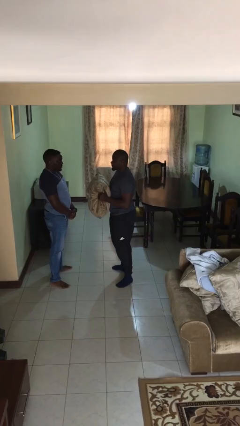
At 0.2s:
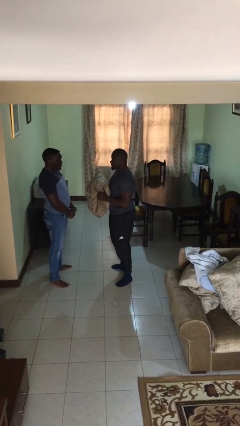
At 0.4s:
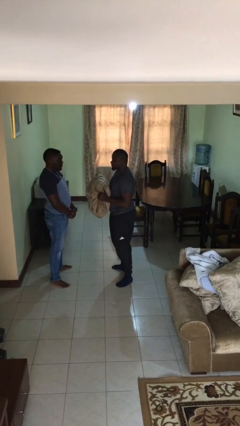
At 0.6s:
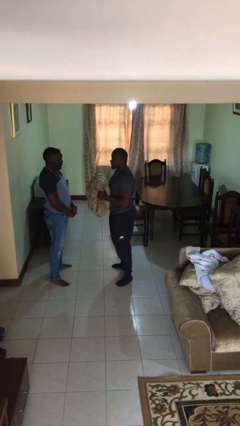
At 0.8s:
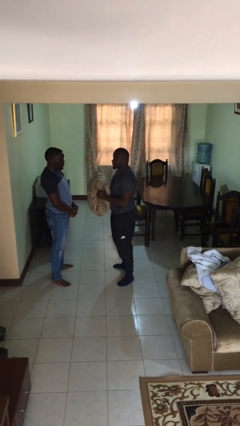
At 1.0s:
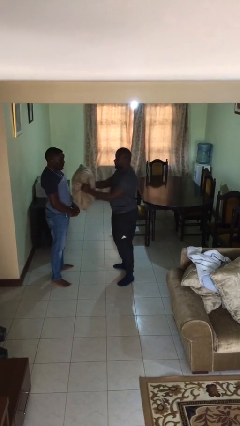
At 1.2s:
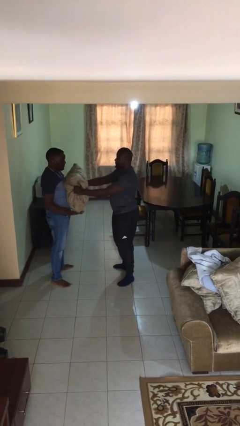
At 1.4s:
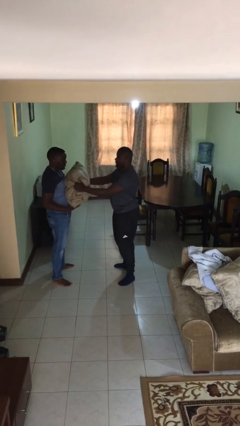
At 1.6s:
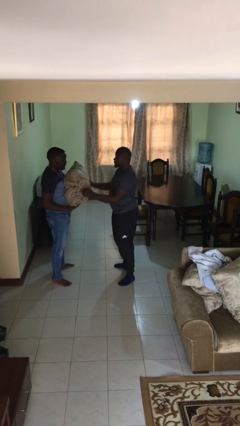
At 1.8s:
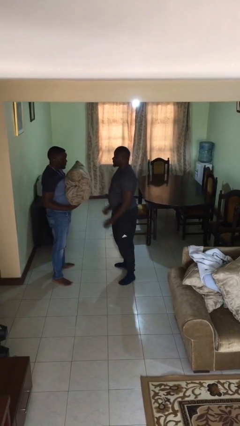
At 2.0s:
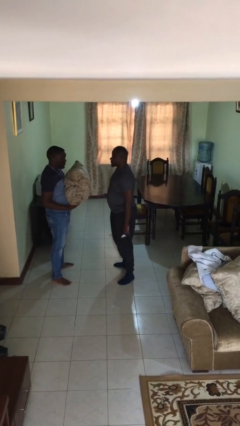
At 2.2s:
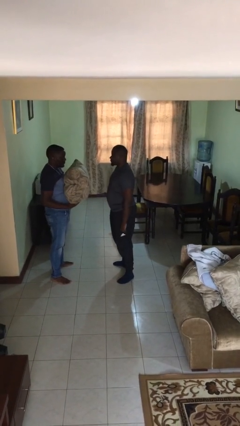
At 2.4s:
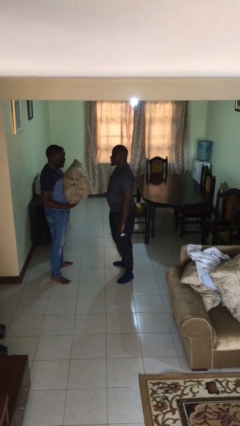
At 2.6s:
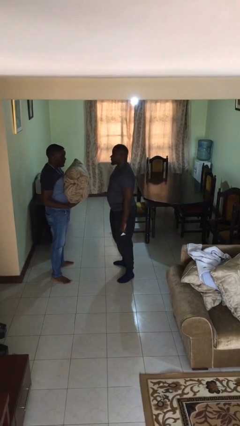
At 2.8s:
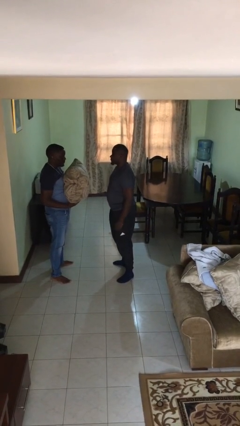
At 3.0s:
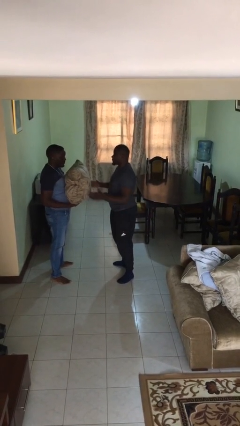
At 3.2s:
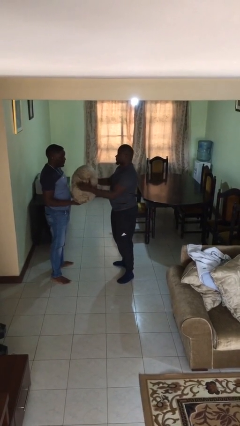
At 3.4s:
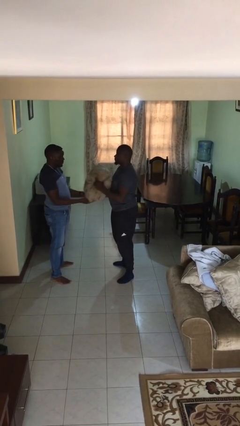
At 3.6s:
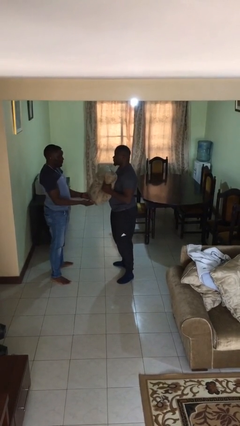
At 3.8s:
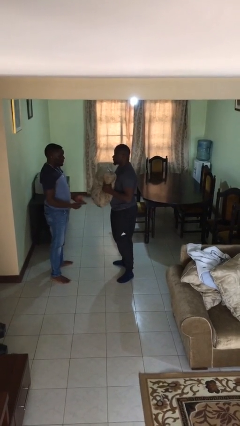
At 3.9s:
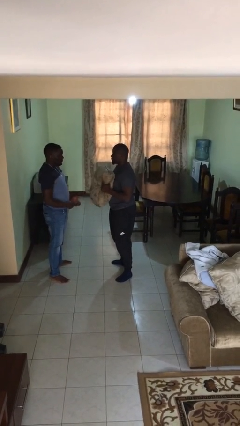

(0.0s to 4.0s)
person transfers object to person

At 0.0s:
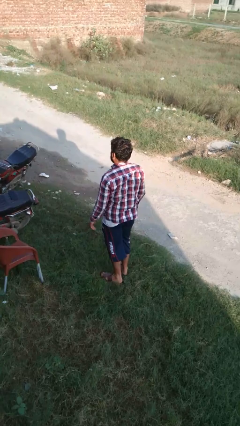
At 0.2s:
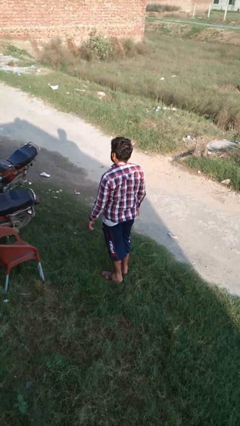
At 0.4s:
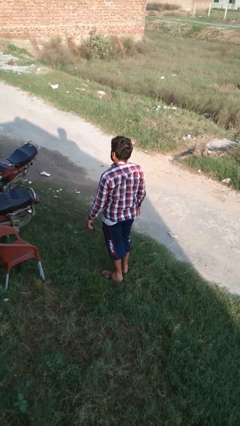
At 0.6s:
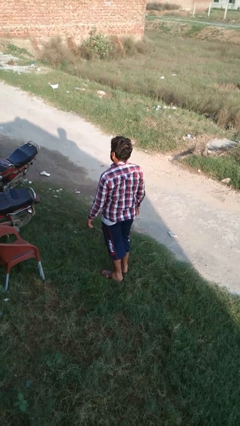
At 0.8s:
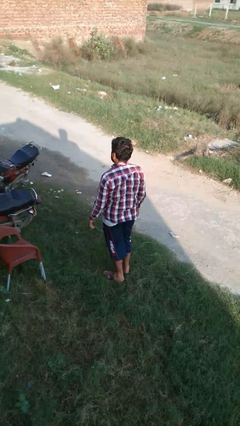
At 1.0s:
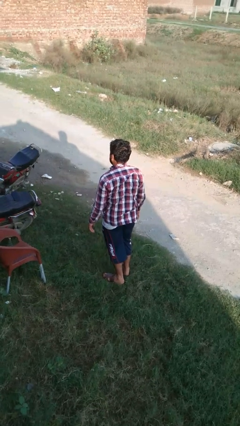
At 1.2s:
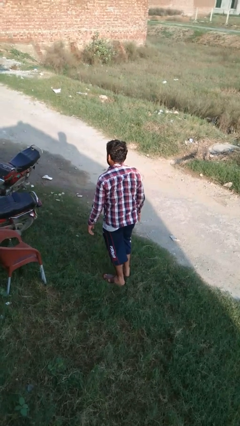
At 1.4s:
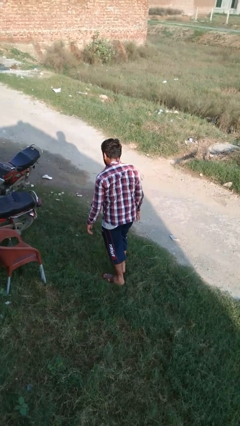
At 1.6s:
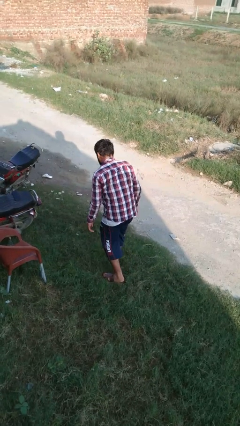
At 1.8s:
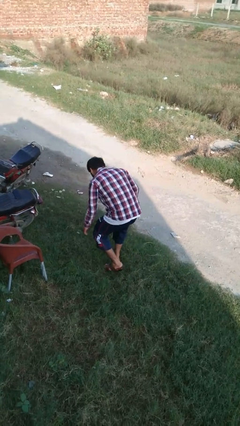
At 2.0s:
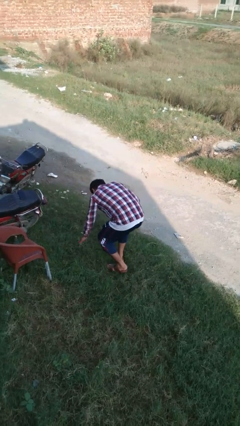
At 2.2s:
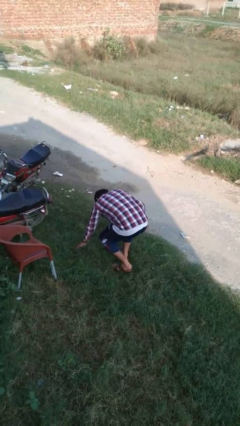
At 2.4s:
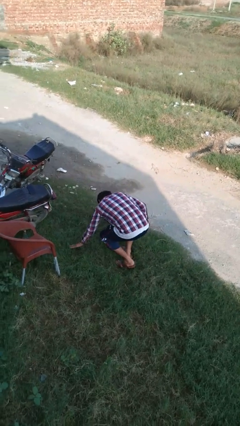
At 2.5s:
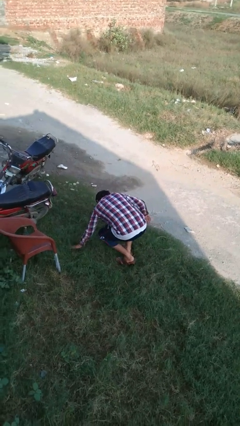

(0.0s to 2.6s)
person trips on object on floor

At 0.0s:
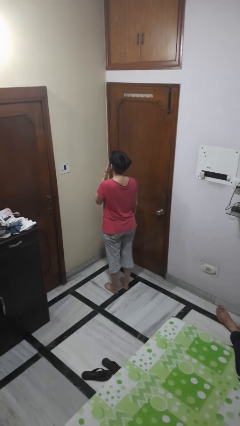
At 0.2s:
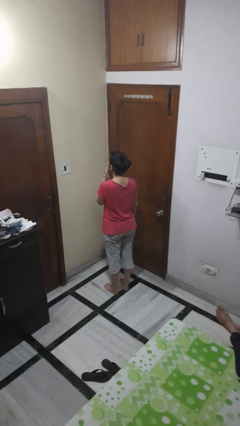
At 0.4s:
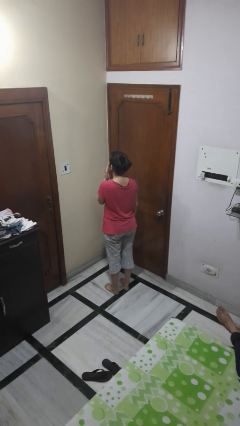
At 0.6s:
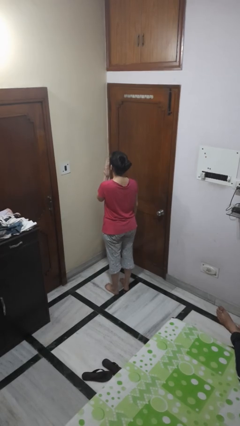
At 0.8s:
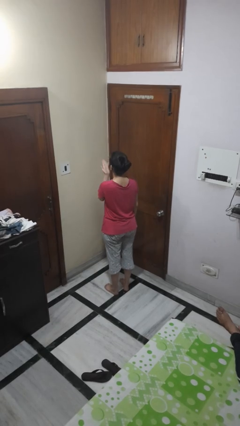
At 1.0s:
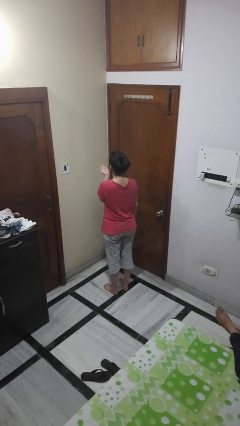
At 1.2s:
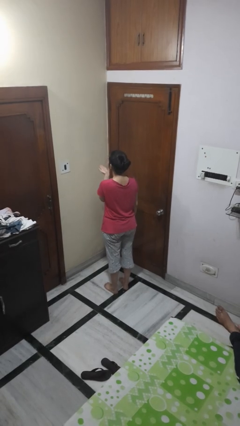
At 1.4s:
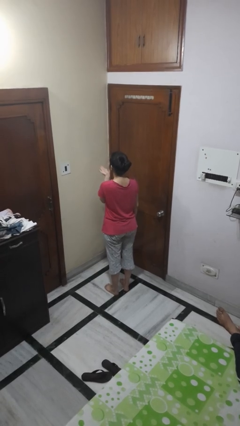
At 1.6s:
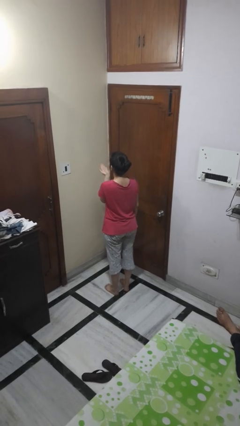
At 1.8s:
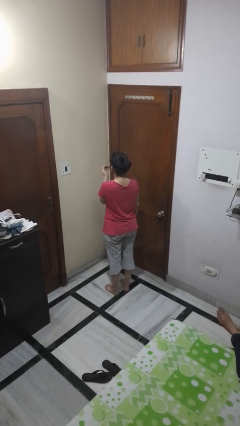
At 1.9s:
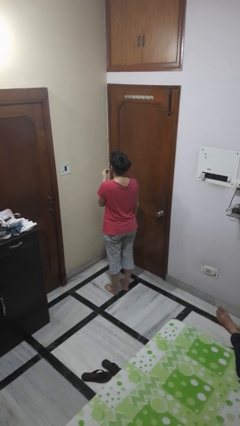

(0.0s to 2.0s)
person gestures blow kiss

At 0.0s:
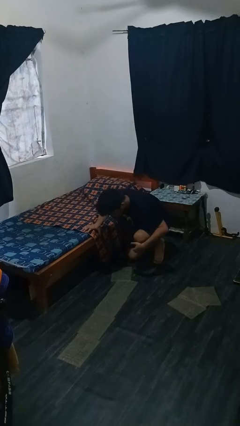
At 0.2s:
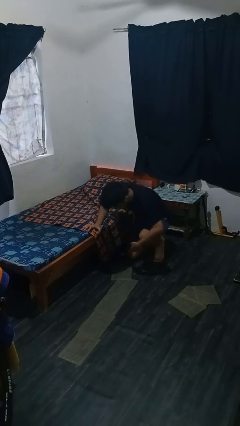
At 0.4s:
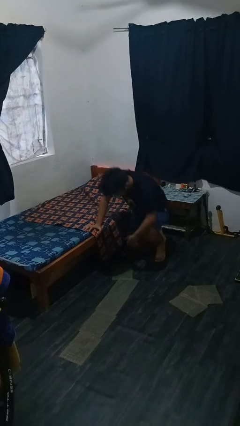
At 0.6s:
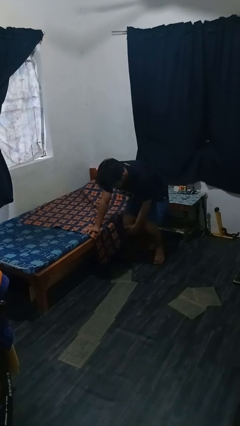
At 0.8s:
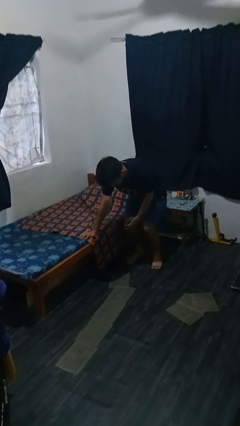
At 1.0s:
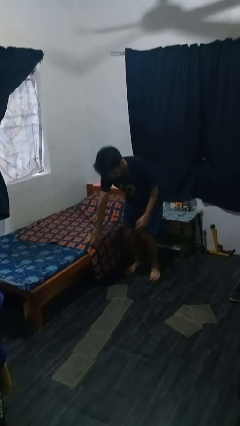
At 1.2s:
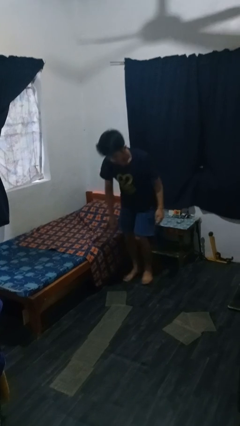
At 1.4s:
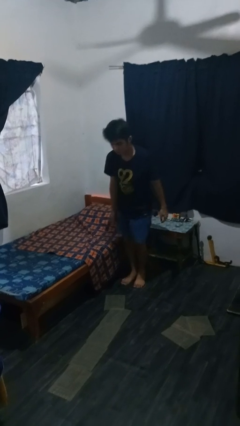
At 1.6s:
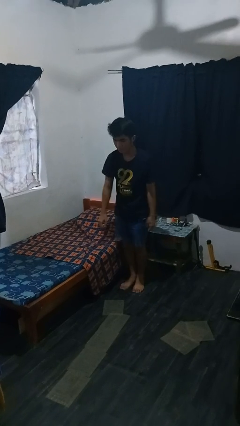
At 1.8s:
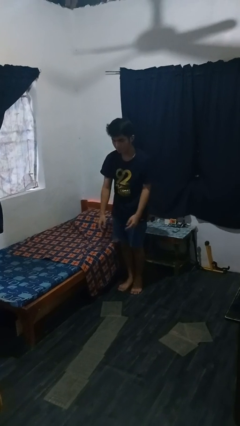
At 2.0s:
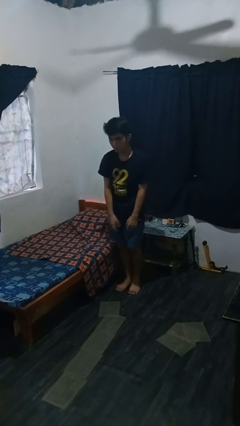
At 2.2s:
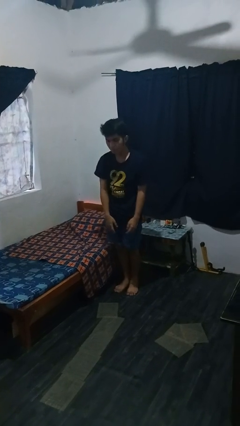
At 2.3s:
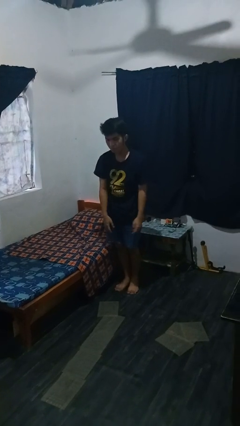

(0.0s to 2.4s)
person stands up from floor

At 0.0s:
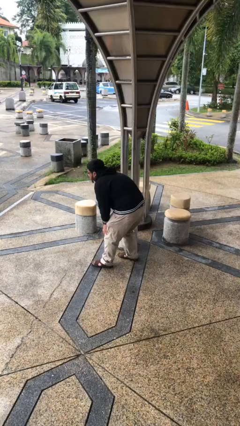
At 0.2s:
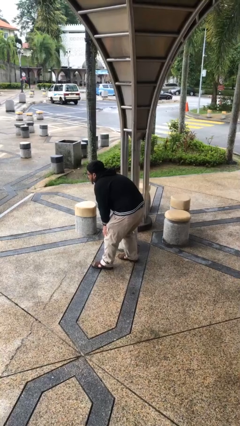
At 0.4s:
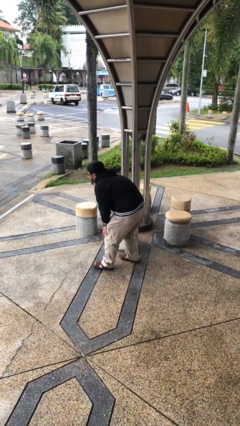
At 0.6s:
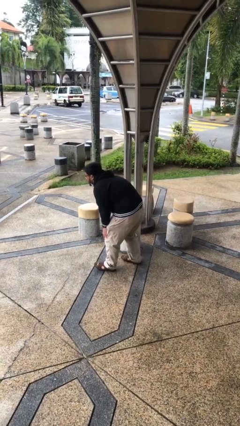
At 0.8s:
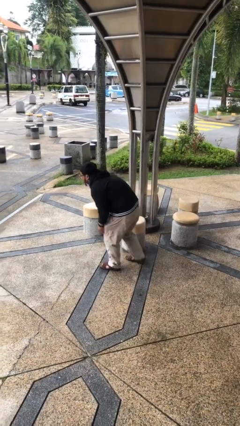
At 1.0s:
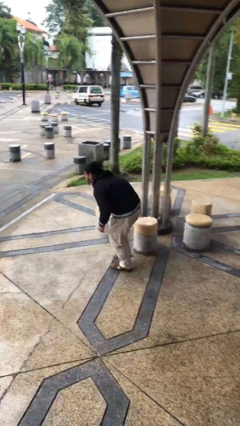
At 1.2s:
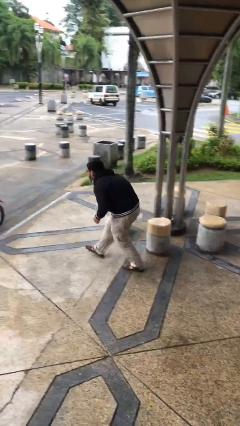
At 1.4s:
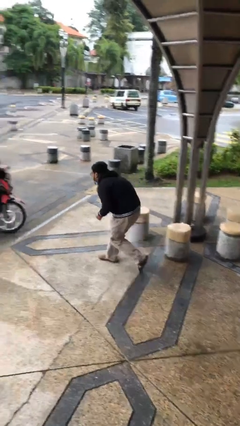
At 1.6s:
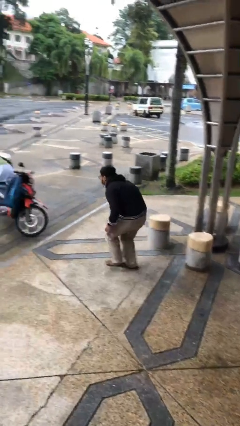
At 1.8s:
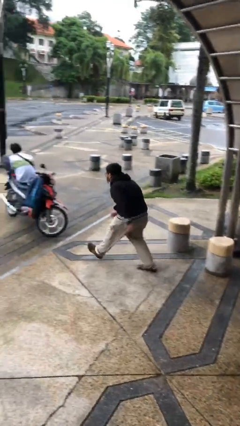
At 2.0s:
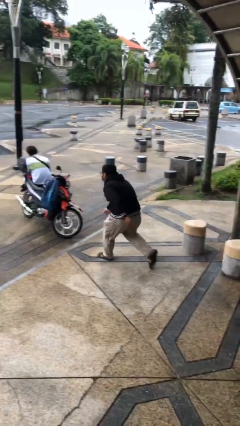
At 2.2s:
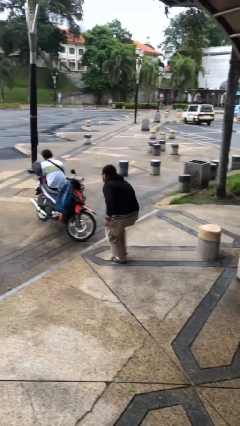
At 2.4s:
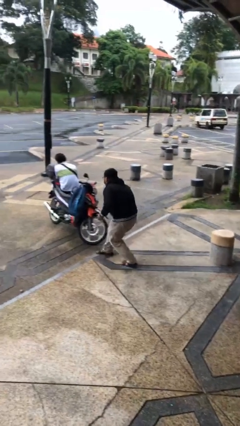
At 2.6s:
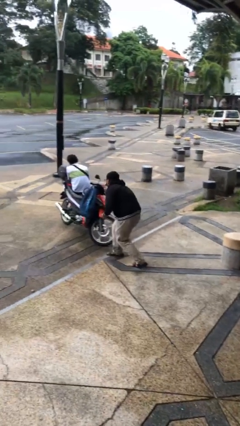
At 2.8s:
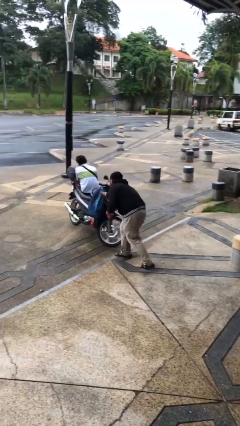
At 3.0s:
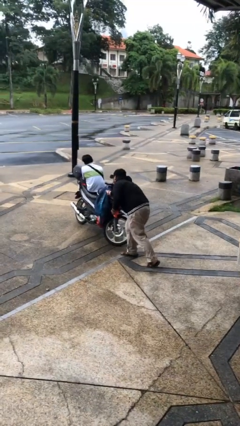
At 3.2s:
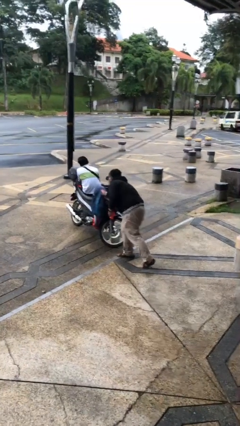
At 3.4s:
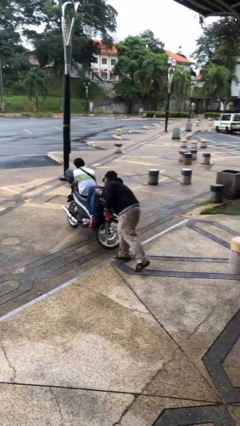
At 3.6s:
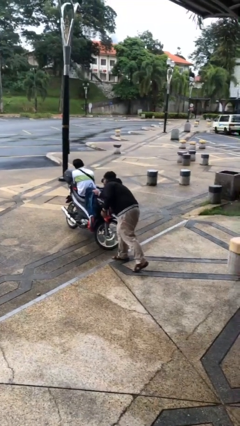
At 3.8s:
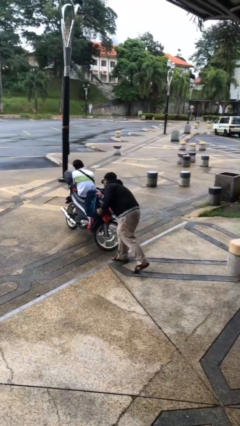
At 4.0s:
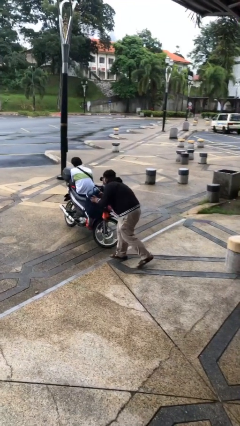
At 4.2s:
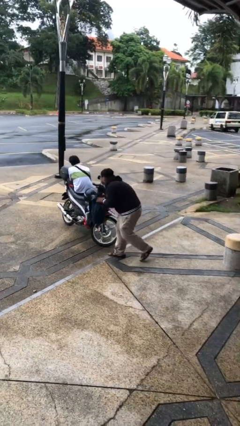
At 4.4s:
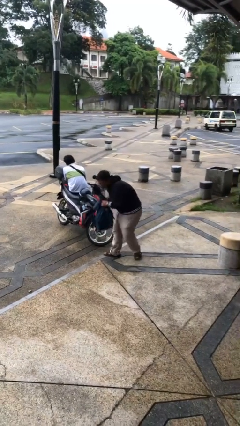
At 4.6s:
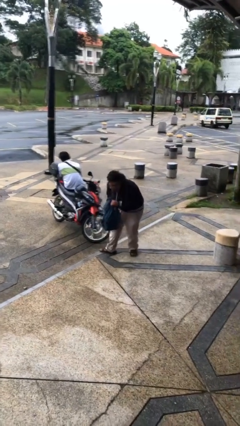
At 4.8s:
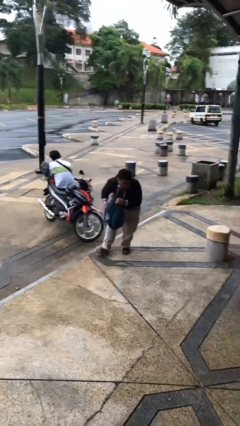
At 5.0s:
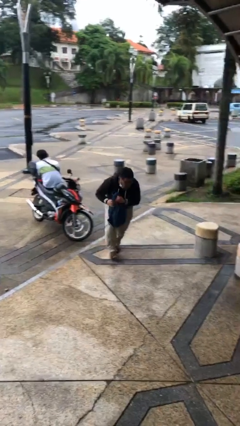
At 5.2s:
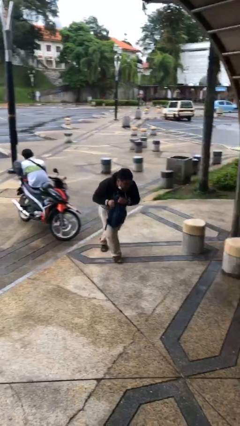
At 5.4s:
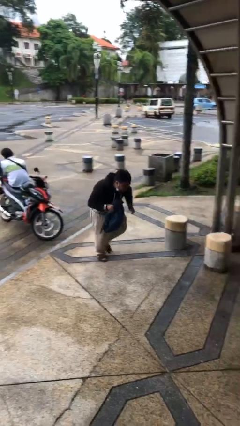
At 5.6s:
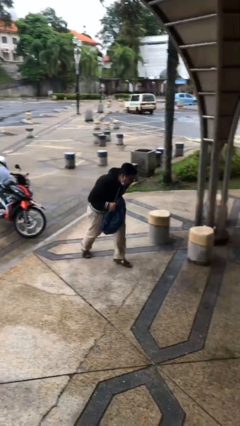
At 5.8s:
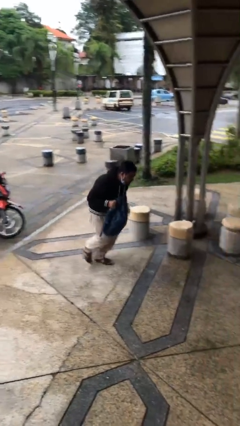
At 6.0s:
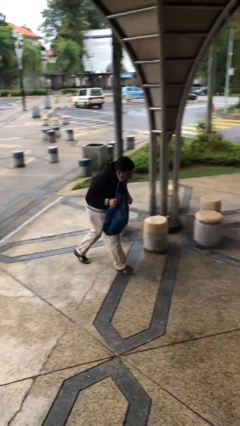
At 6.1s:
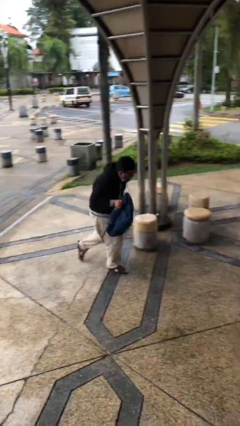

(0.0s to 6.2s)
person steals object from person

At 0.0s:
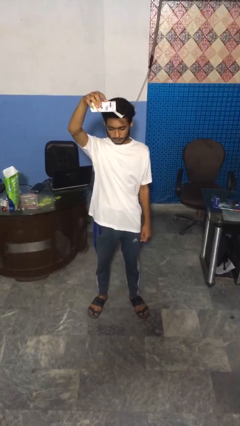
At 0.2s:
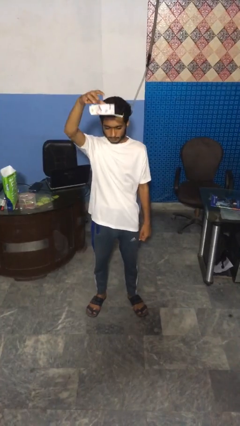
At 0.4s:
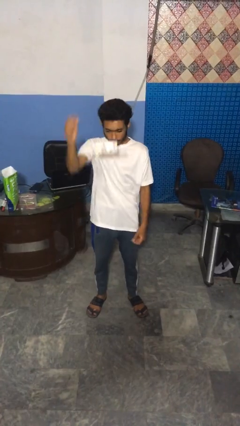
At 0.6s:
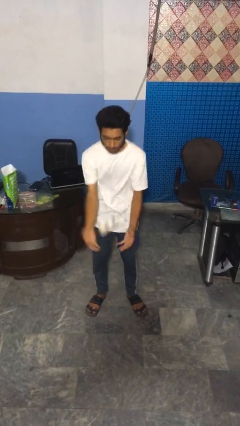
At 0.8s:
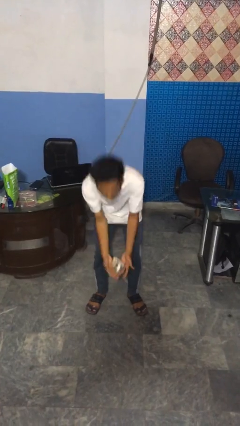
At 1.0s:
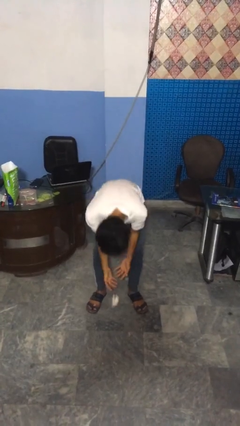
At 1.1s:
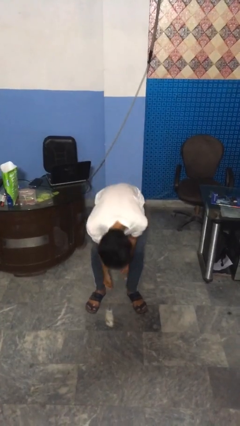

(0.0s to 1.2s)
person drops object
